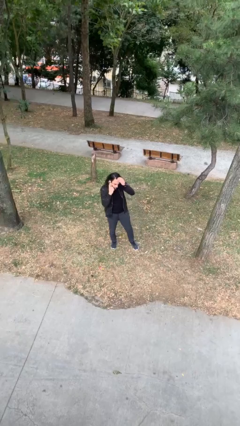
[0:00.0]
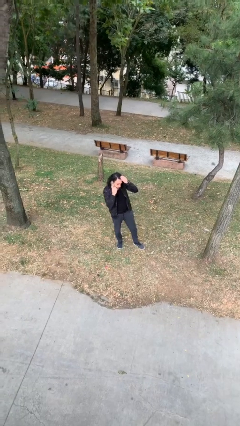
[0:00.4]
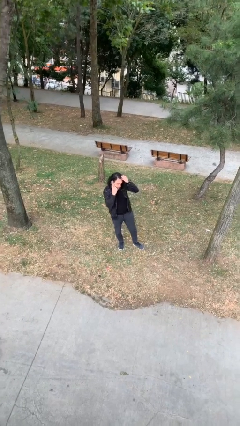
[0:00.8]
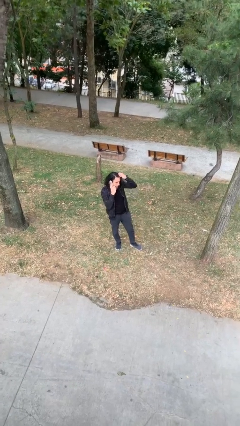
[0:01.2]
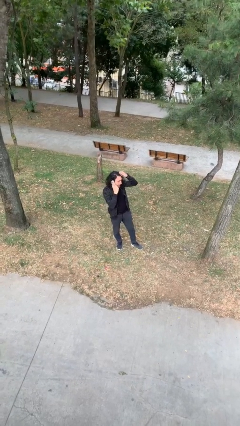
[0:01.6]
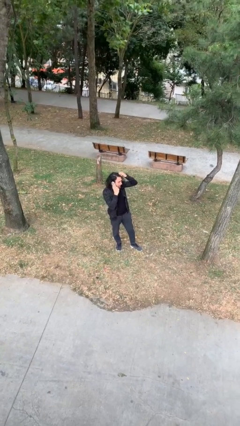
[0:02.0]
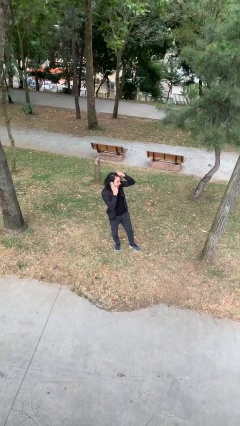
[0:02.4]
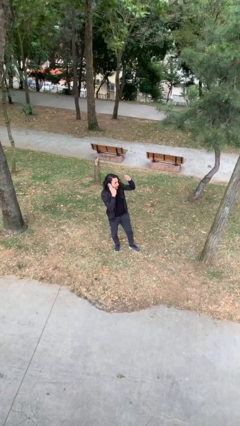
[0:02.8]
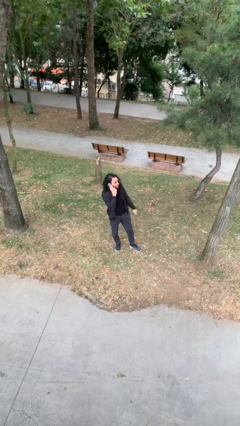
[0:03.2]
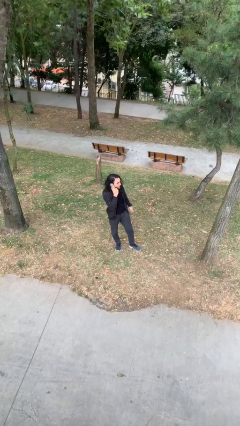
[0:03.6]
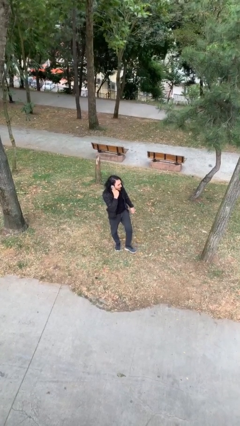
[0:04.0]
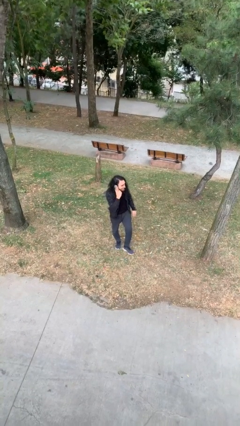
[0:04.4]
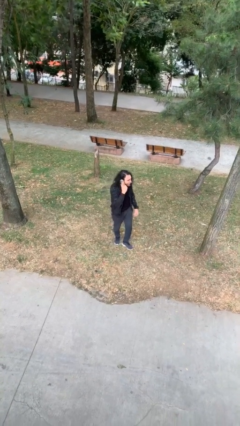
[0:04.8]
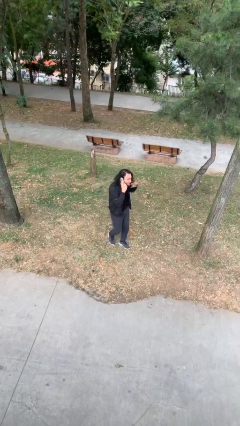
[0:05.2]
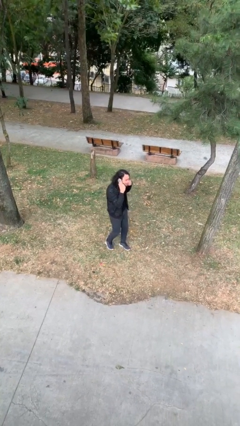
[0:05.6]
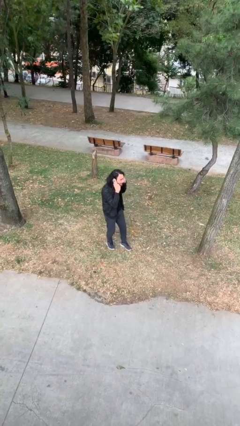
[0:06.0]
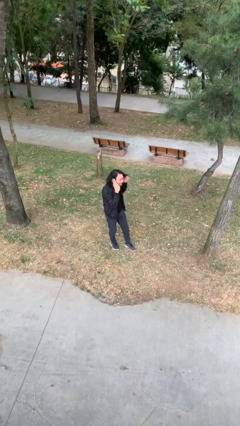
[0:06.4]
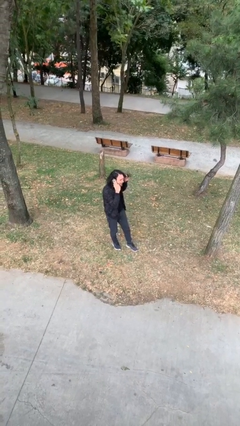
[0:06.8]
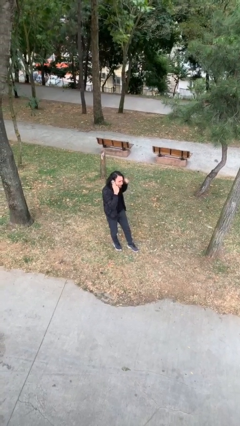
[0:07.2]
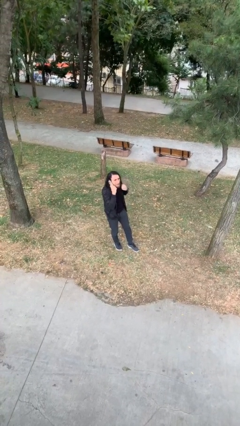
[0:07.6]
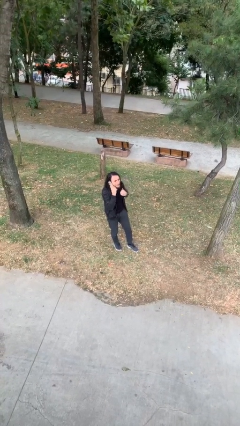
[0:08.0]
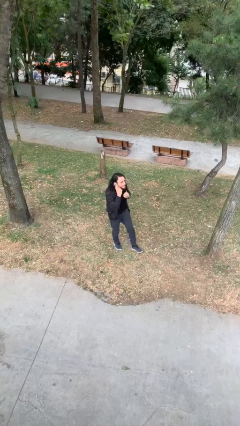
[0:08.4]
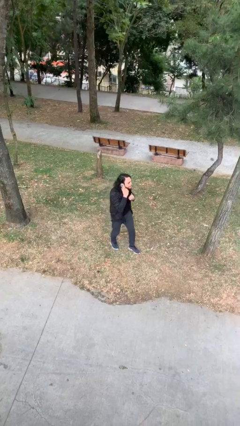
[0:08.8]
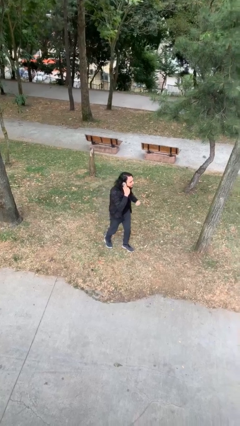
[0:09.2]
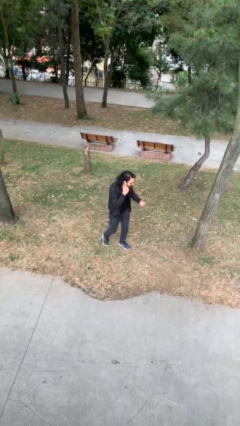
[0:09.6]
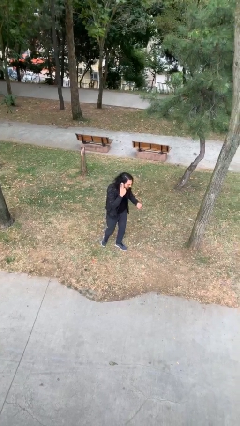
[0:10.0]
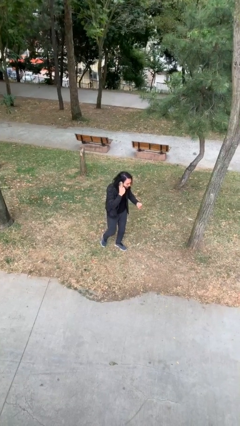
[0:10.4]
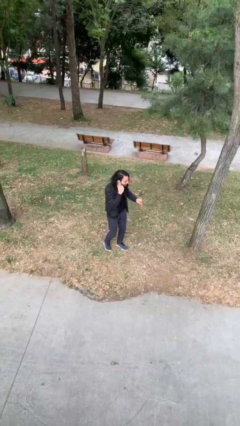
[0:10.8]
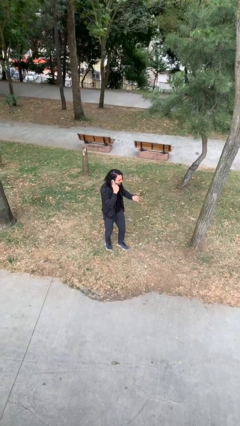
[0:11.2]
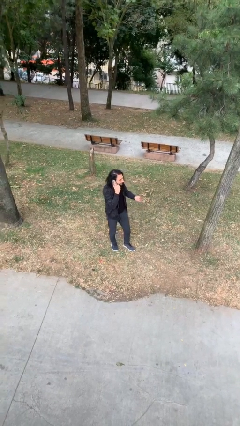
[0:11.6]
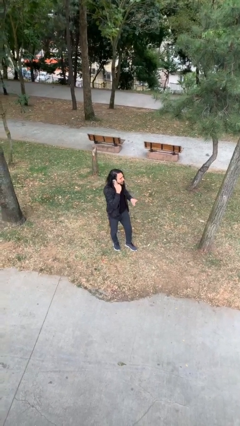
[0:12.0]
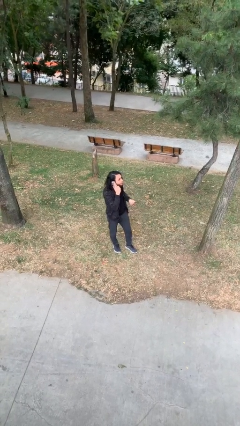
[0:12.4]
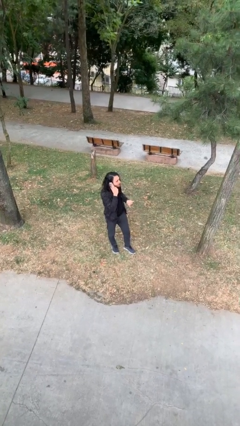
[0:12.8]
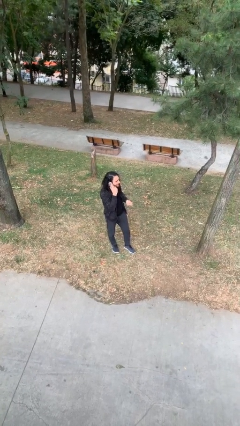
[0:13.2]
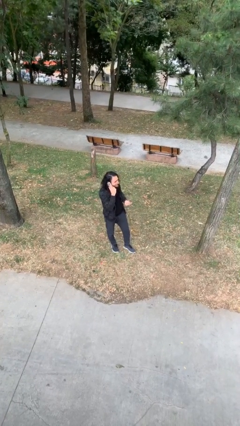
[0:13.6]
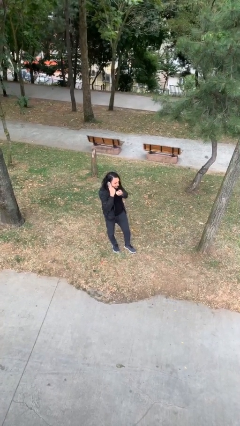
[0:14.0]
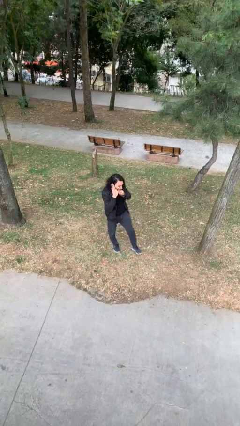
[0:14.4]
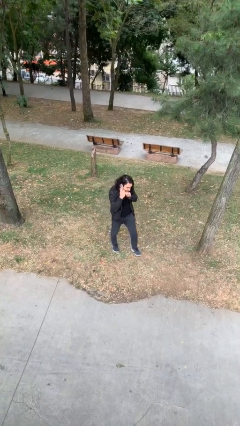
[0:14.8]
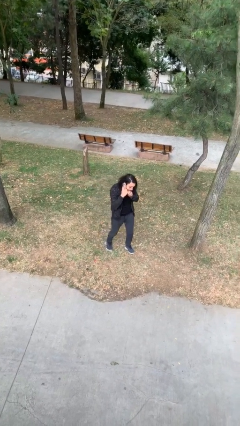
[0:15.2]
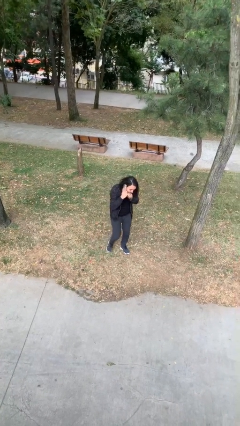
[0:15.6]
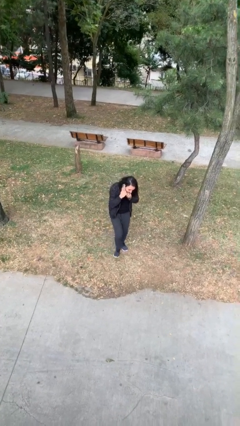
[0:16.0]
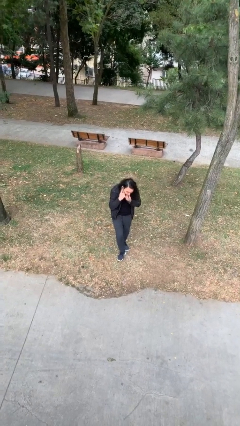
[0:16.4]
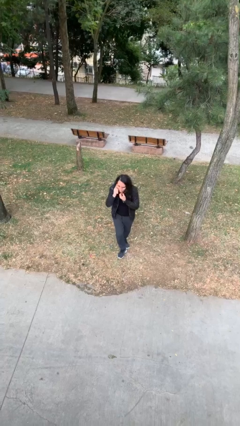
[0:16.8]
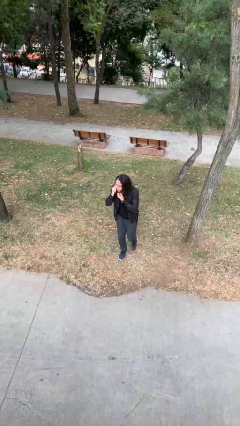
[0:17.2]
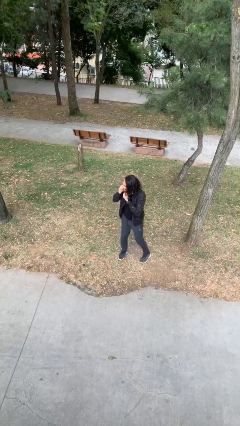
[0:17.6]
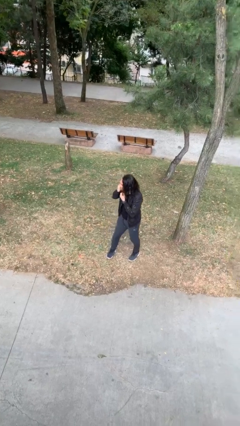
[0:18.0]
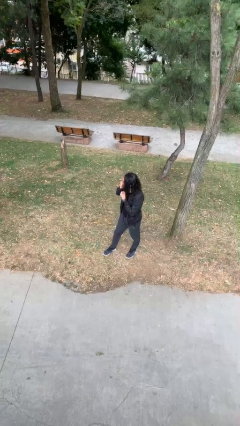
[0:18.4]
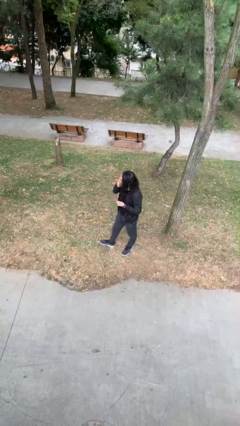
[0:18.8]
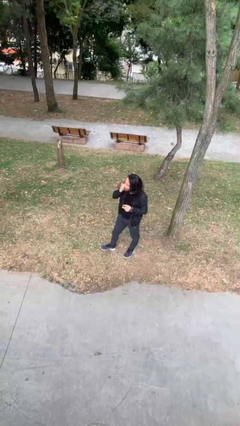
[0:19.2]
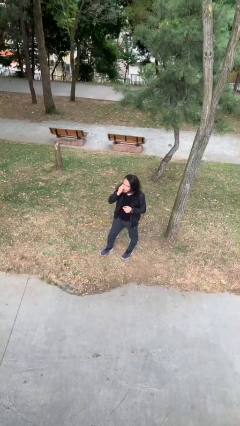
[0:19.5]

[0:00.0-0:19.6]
person talks on phone

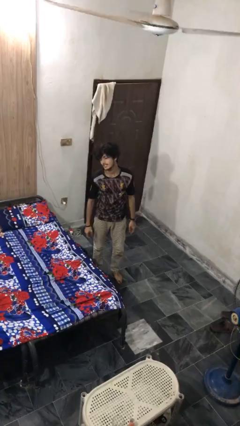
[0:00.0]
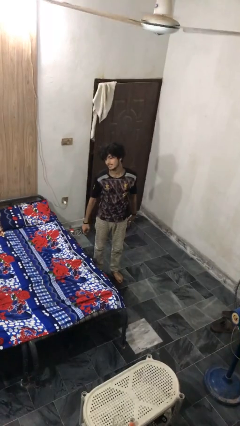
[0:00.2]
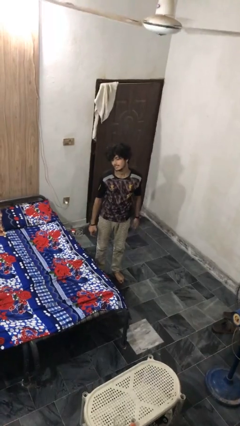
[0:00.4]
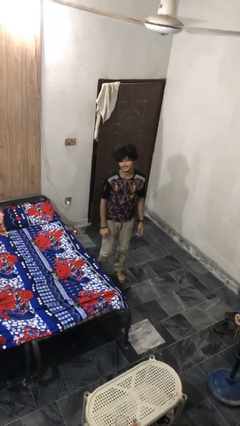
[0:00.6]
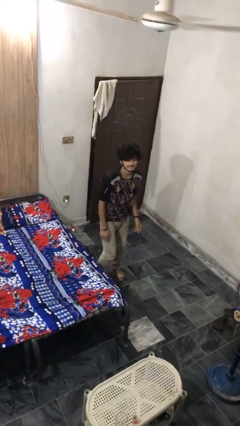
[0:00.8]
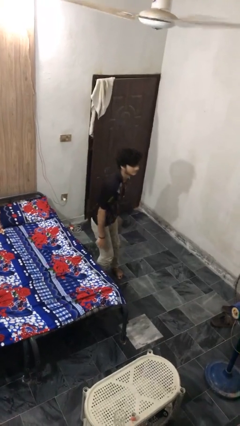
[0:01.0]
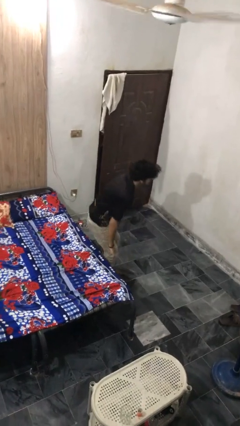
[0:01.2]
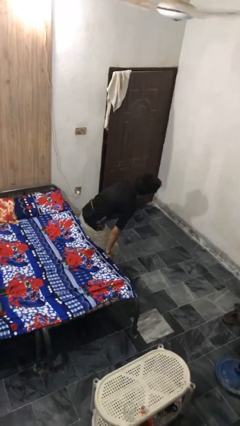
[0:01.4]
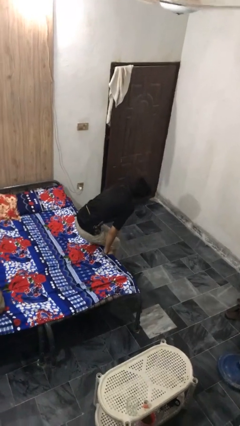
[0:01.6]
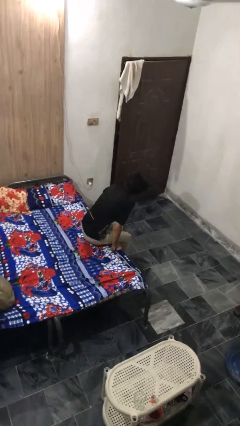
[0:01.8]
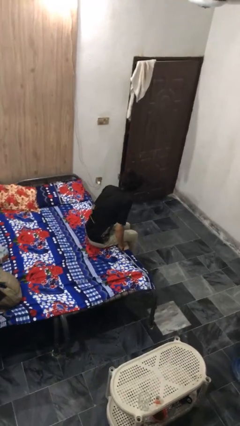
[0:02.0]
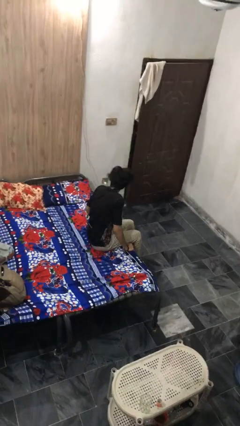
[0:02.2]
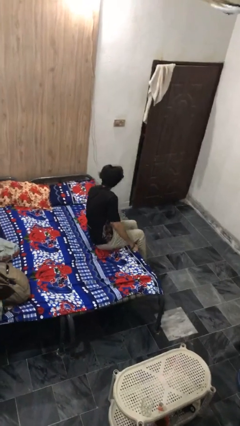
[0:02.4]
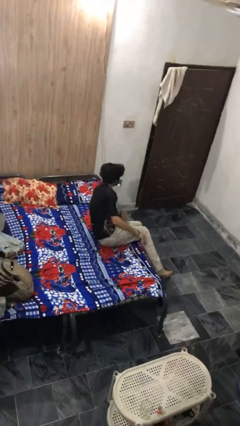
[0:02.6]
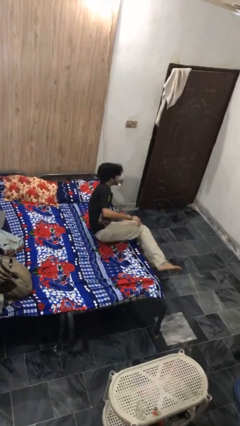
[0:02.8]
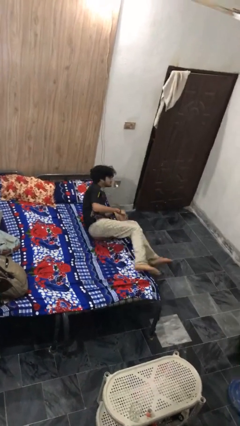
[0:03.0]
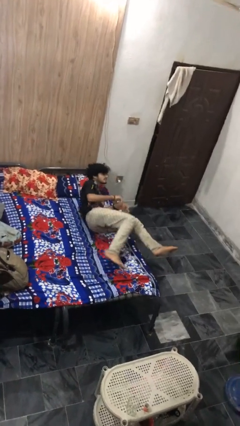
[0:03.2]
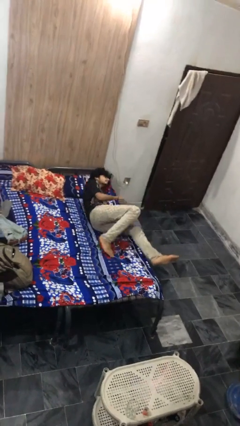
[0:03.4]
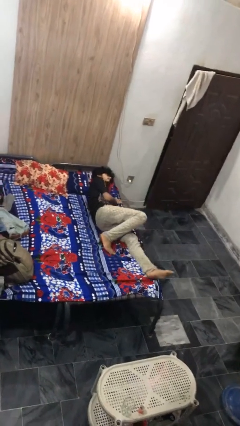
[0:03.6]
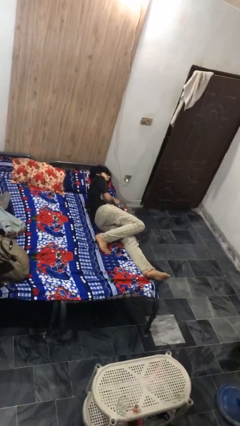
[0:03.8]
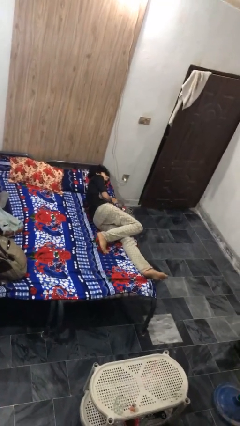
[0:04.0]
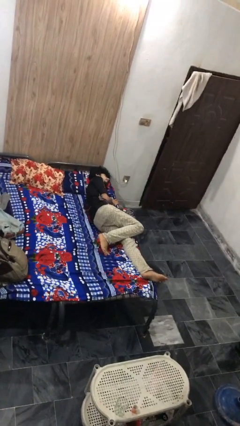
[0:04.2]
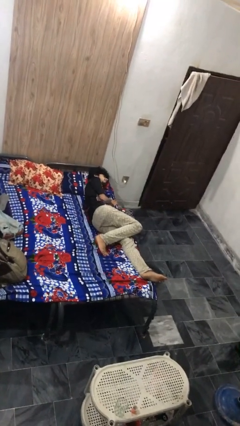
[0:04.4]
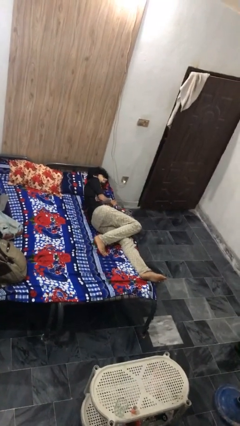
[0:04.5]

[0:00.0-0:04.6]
person lies down on bed

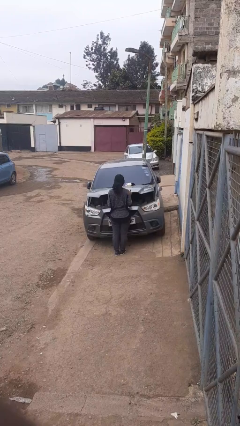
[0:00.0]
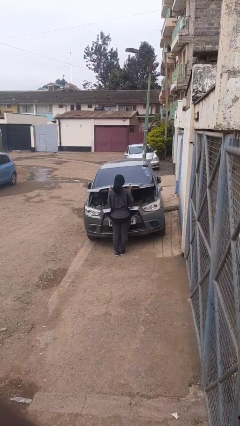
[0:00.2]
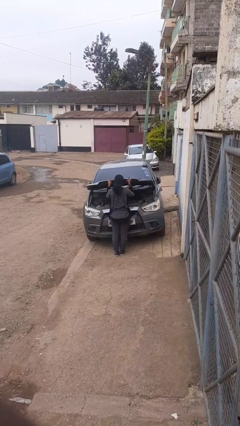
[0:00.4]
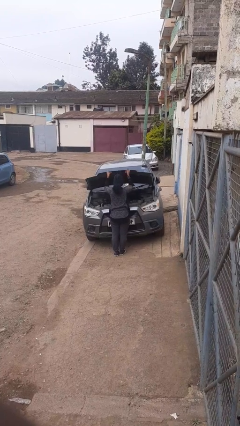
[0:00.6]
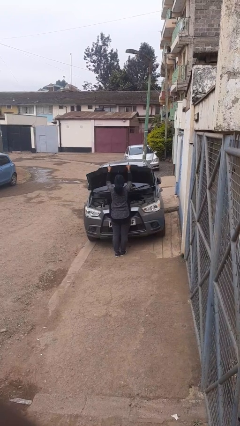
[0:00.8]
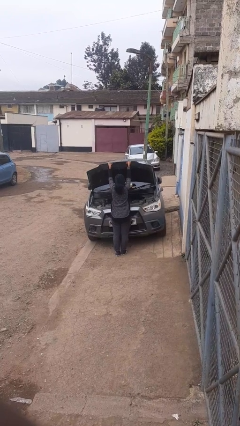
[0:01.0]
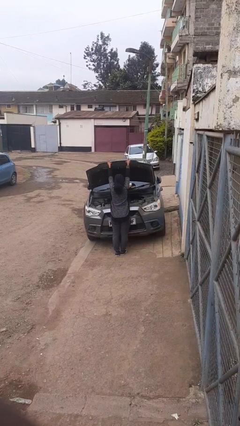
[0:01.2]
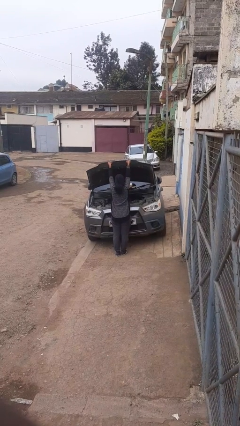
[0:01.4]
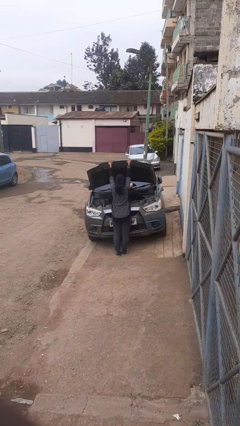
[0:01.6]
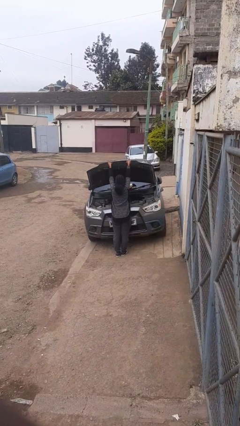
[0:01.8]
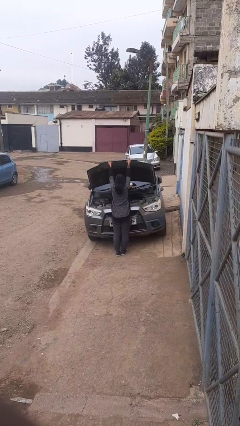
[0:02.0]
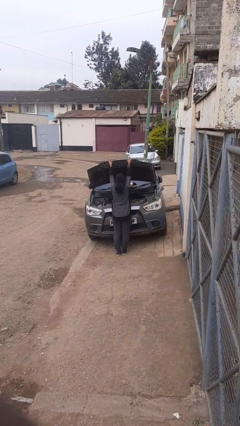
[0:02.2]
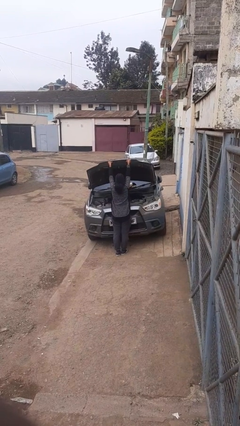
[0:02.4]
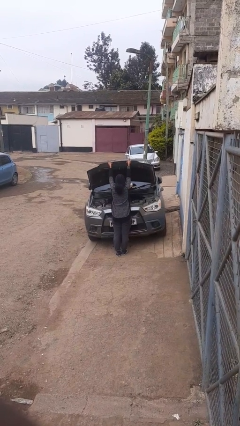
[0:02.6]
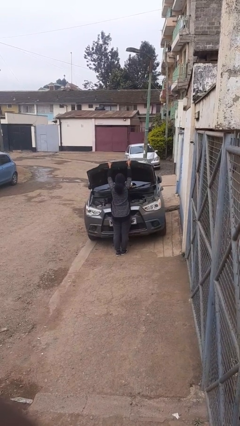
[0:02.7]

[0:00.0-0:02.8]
person opens car hood

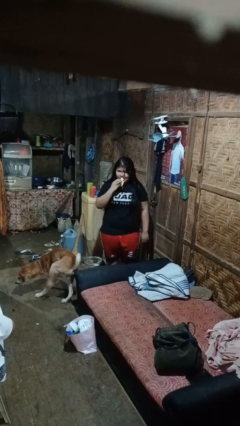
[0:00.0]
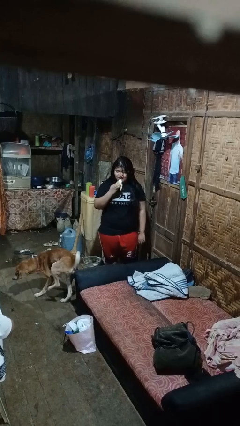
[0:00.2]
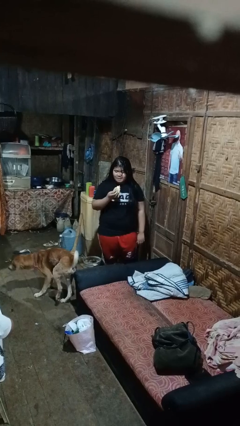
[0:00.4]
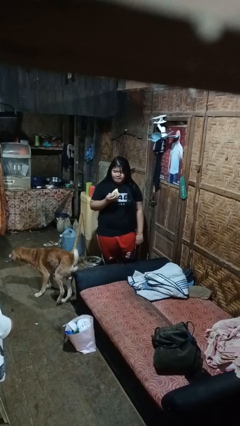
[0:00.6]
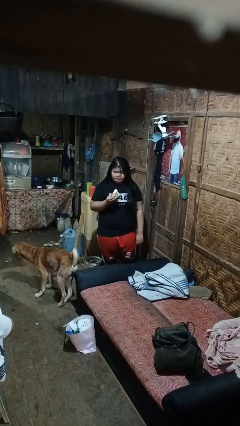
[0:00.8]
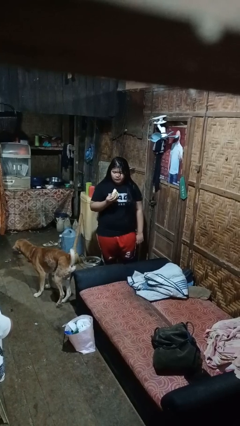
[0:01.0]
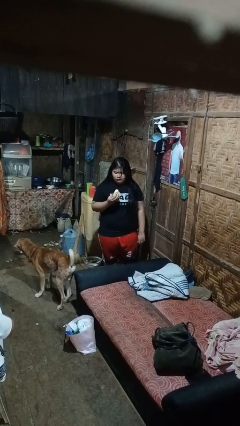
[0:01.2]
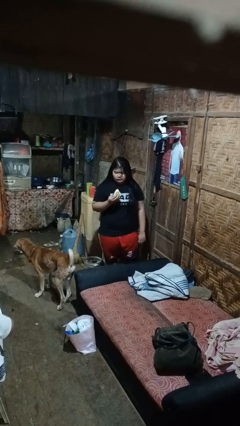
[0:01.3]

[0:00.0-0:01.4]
person eats banana
